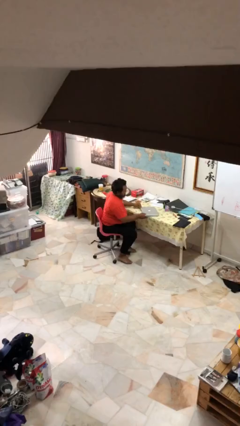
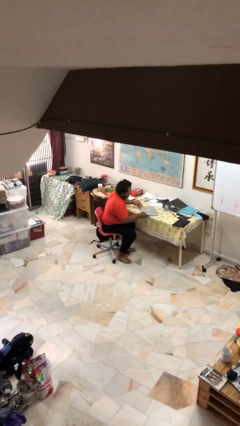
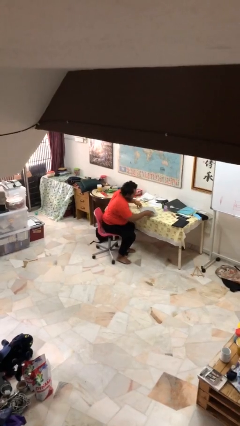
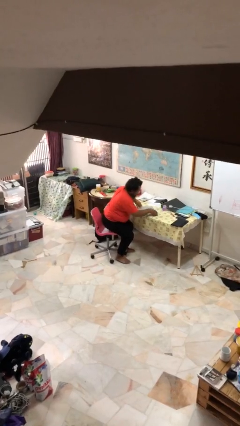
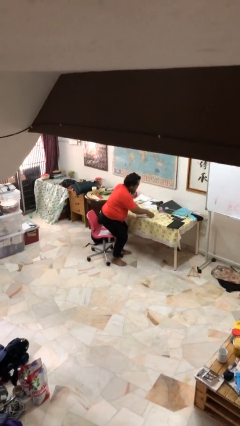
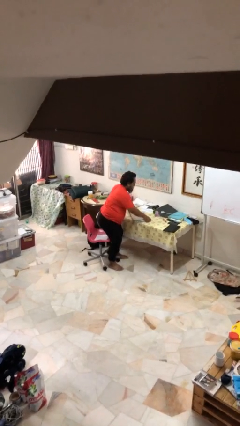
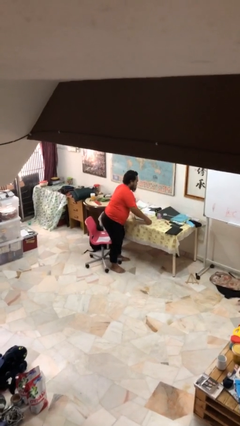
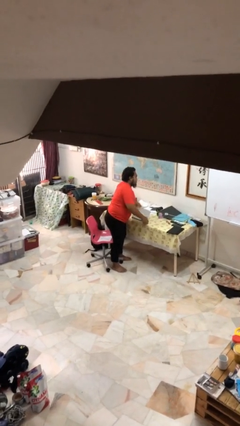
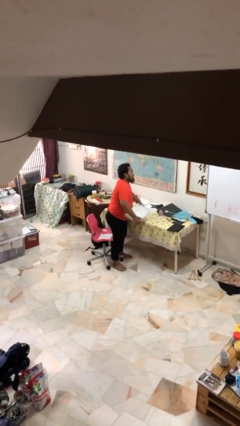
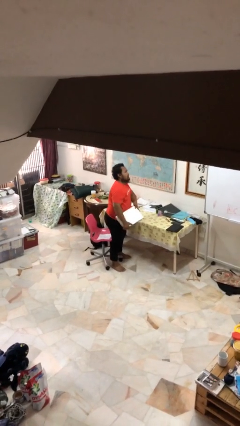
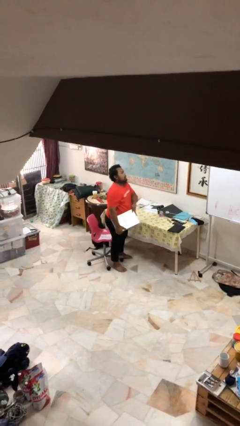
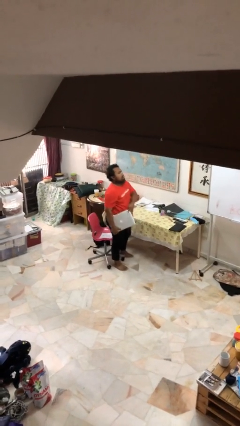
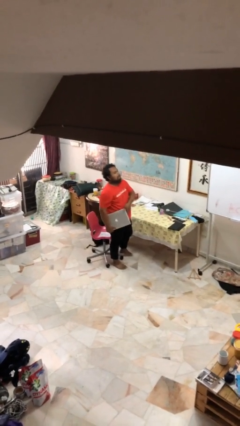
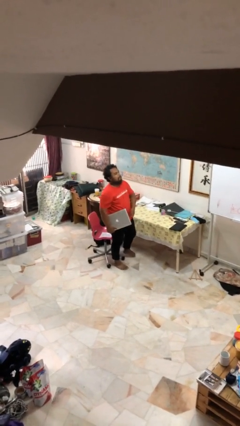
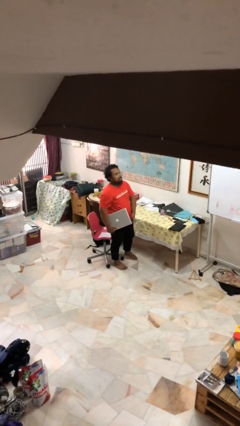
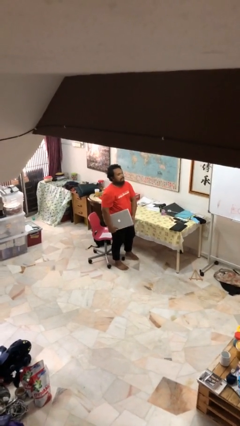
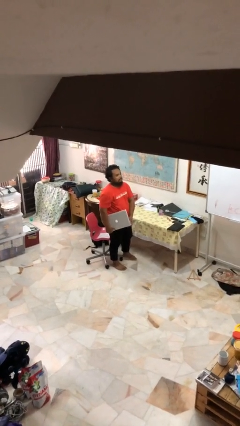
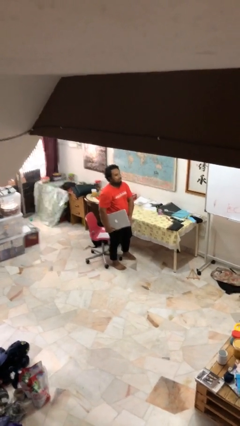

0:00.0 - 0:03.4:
person stands up

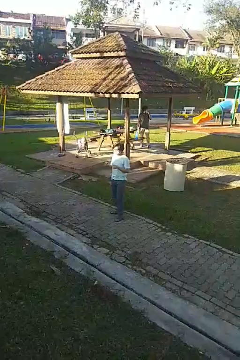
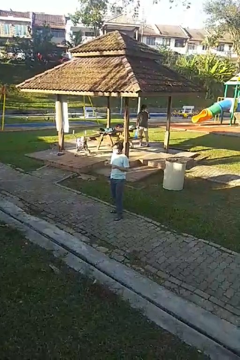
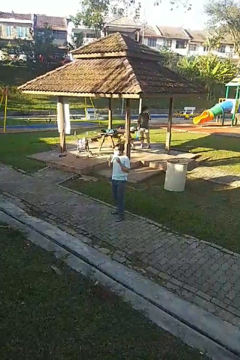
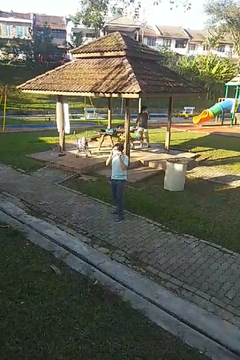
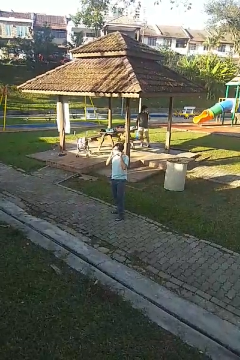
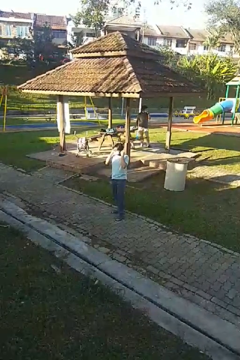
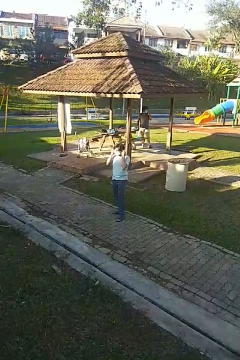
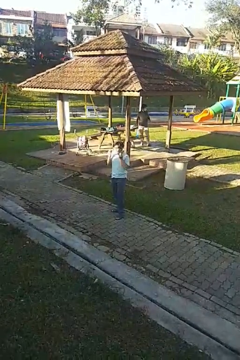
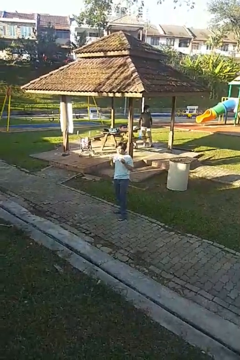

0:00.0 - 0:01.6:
person takes off facemask

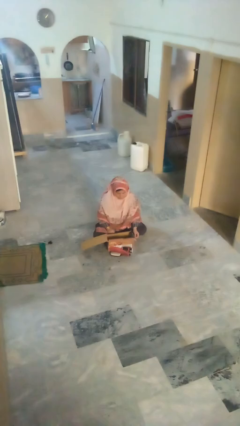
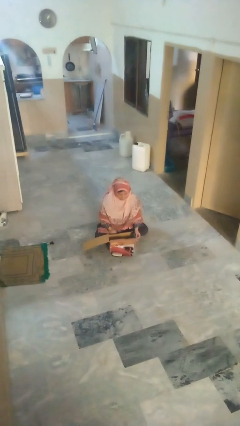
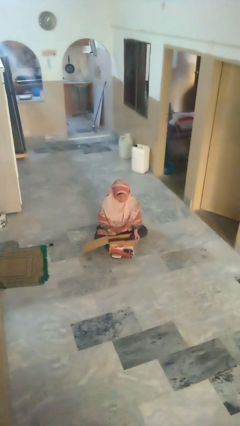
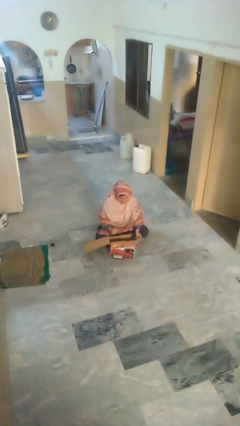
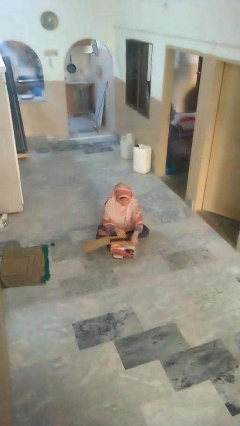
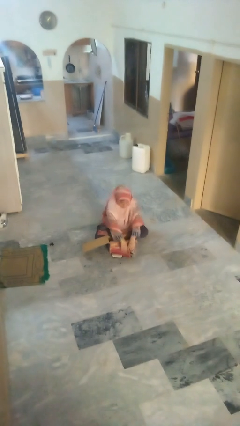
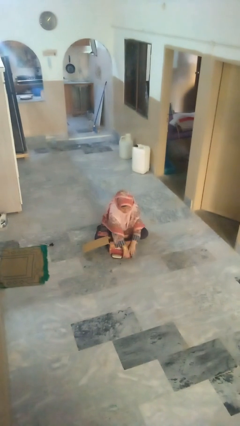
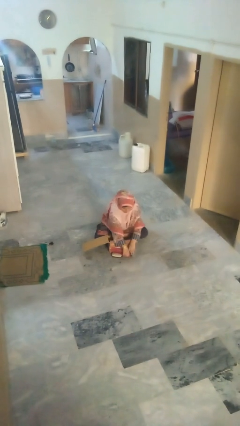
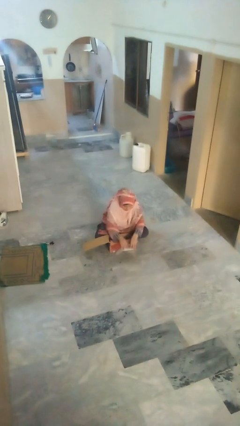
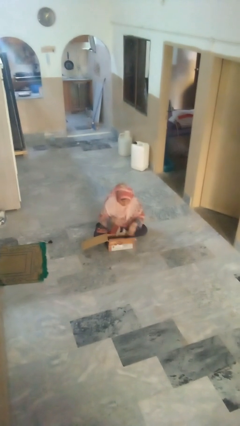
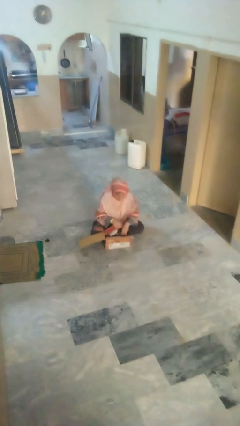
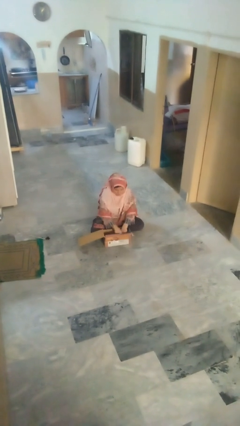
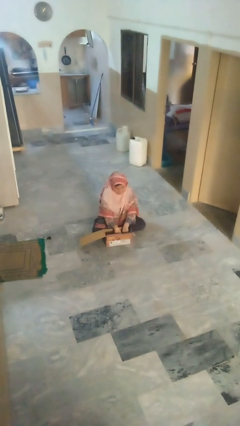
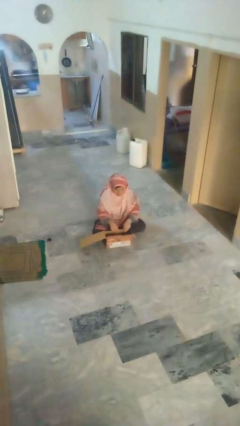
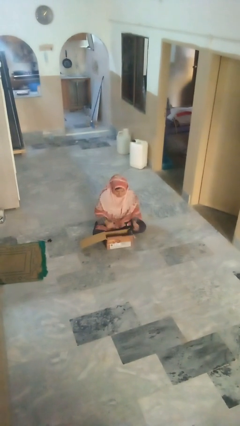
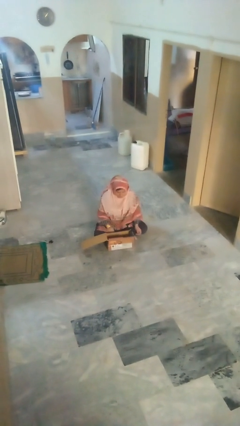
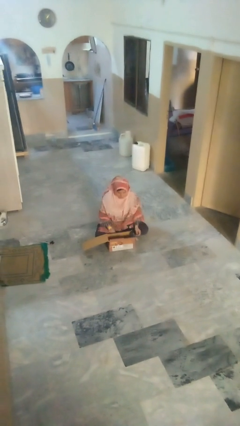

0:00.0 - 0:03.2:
person puts object into box

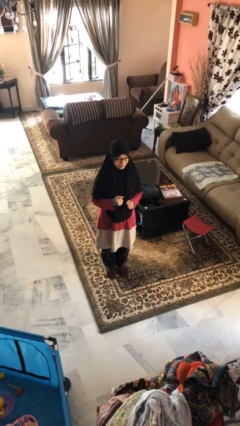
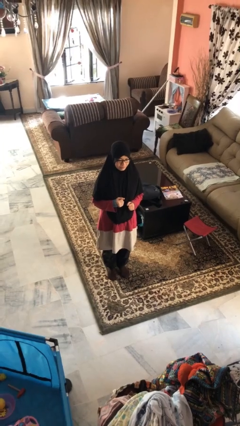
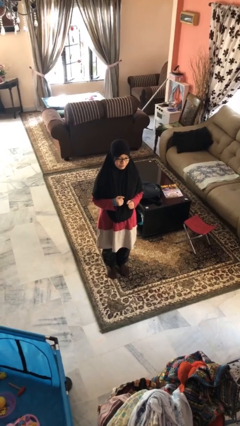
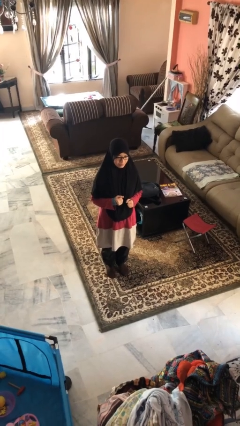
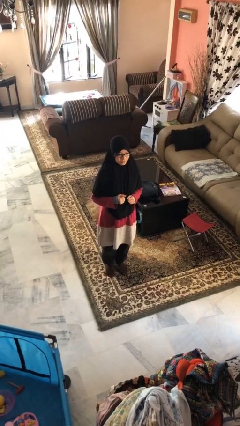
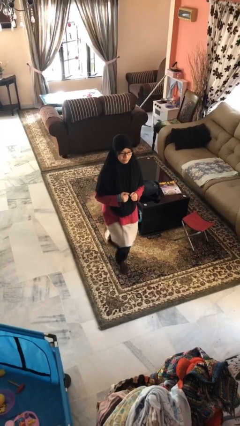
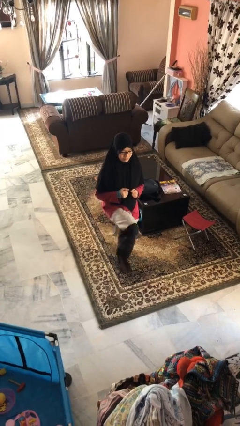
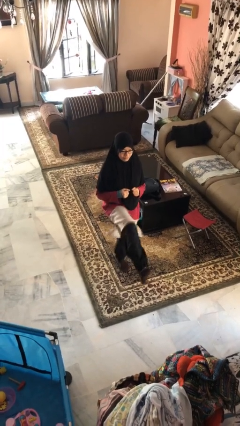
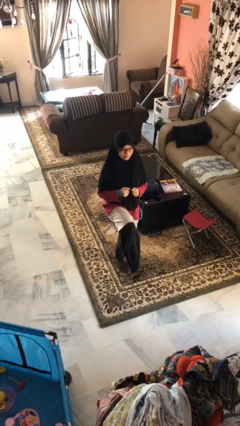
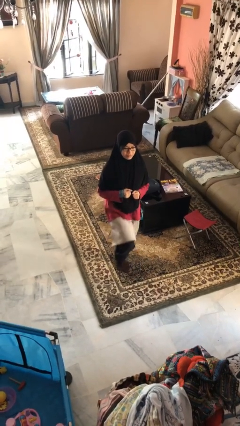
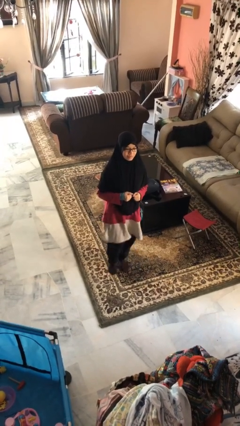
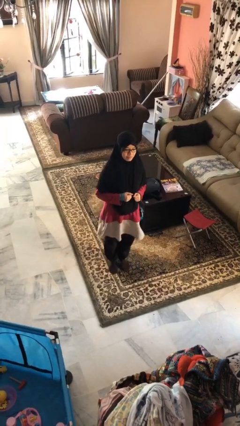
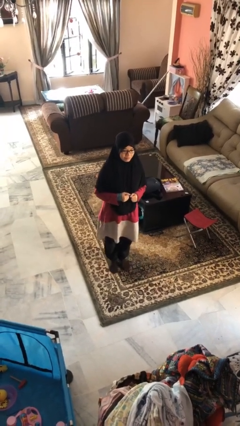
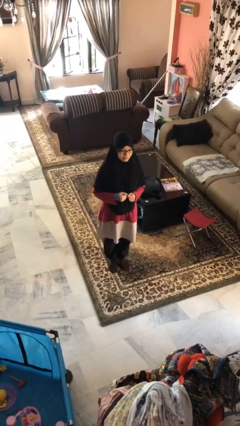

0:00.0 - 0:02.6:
person karate kicks

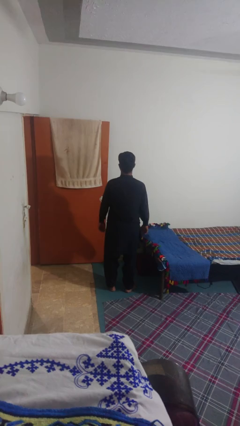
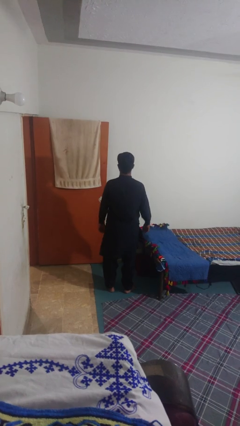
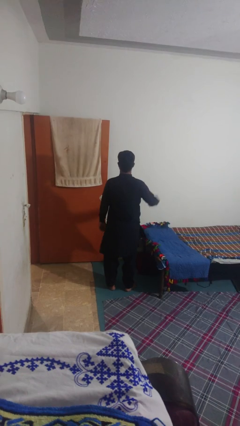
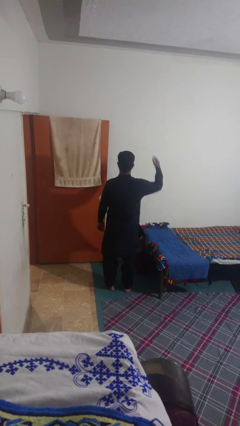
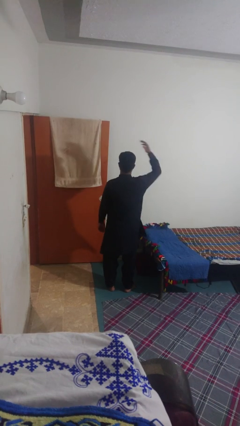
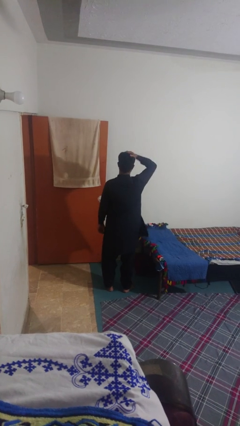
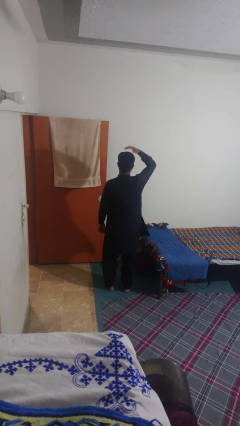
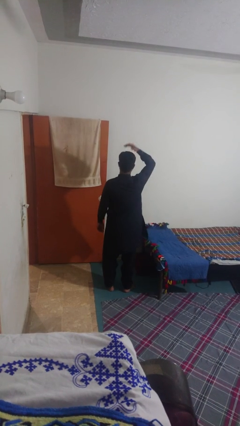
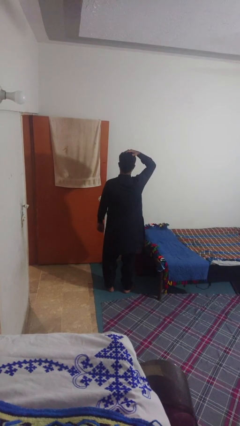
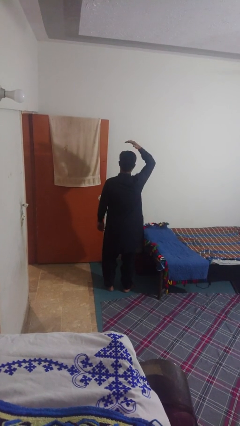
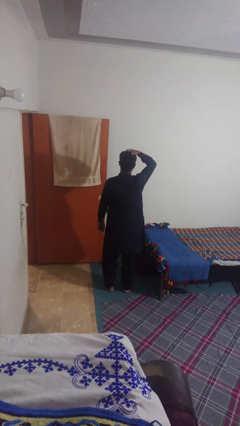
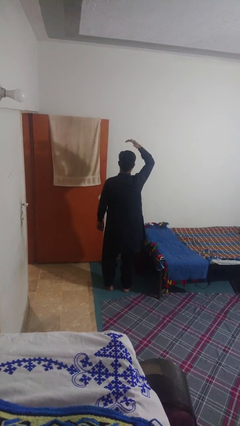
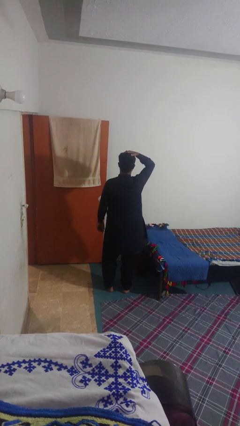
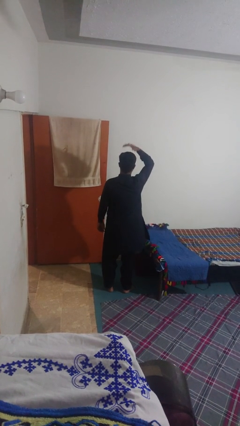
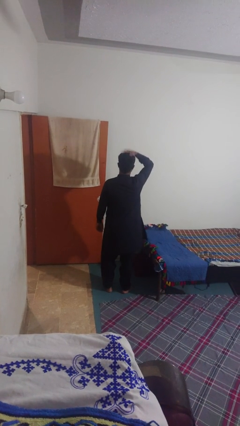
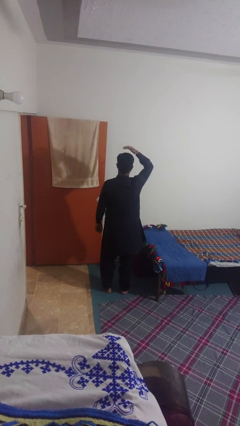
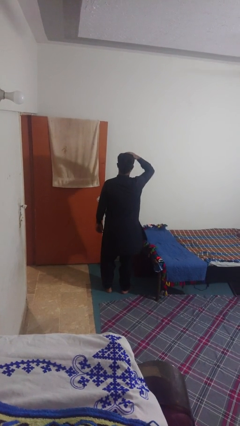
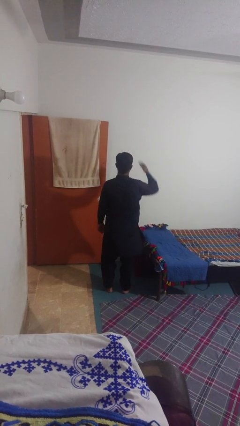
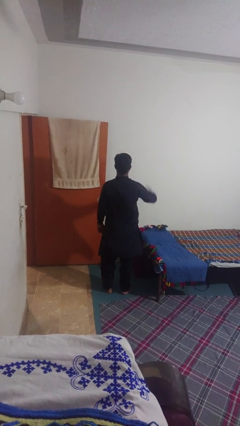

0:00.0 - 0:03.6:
person pats head

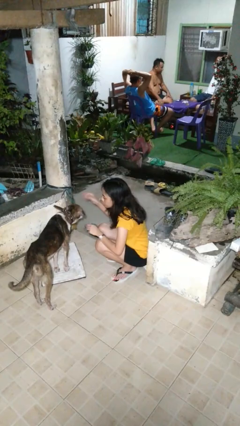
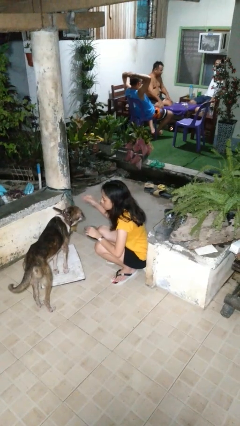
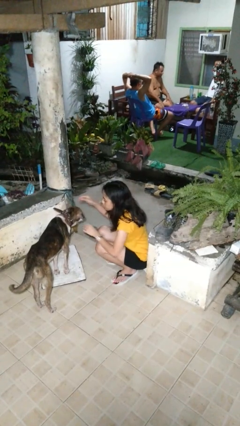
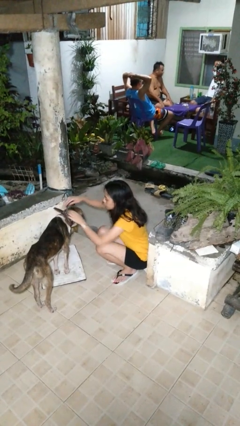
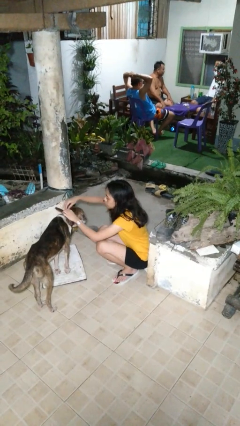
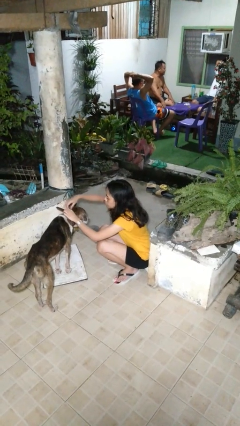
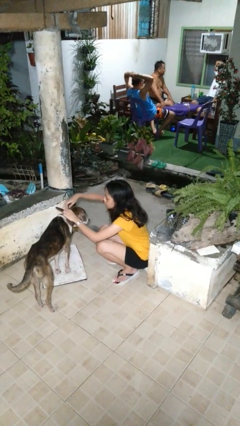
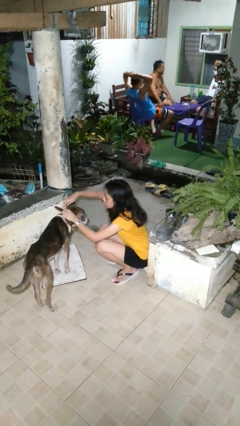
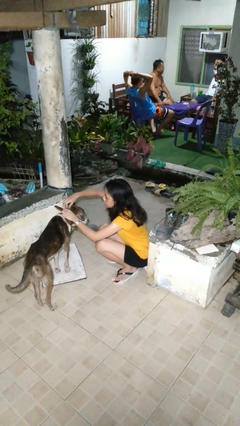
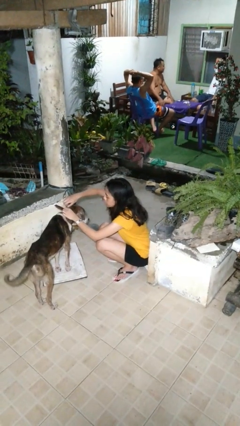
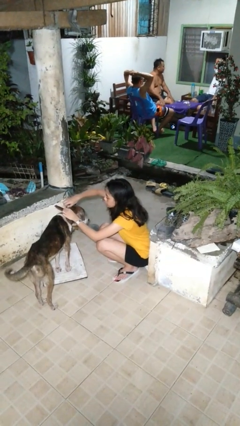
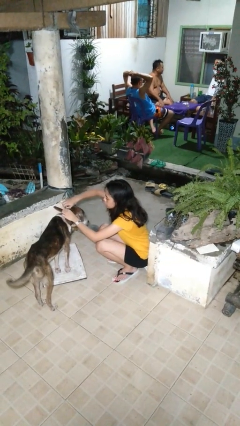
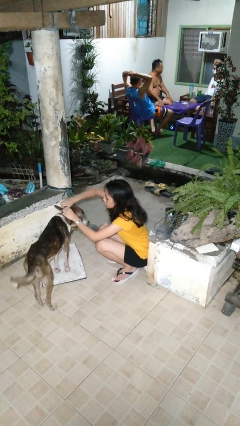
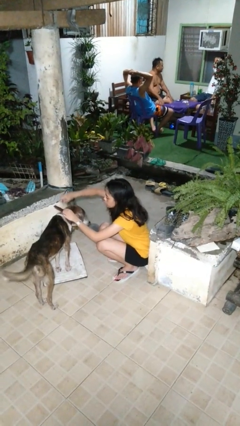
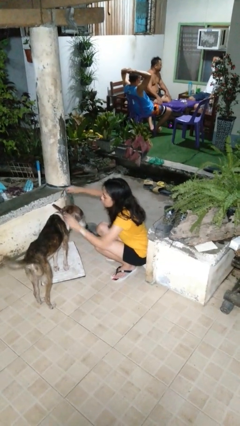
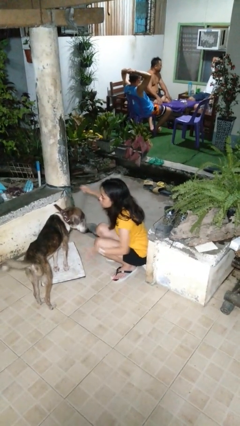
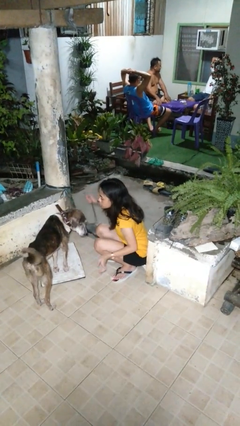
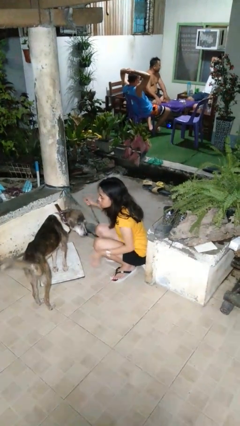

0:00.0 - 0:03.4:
person unattaches leash from dog
